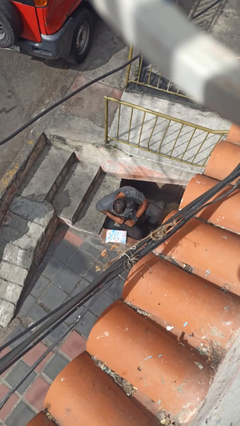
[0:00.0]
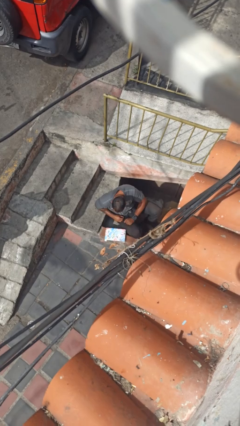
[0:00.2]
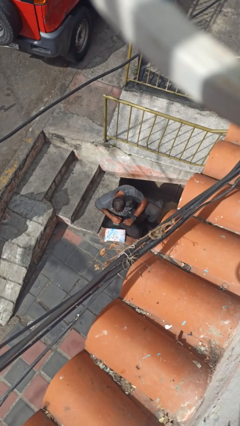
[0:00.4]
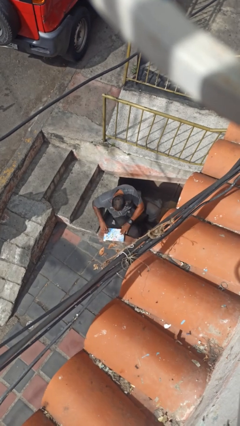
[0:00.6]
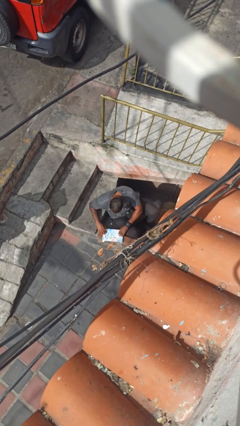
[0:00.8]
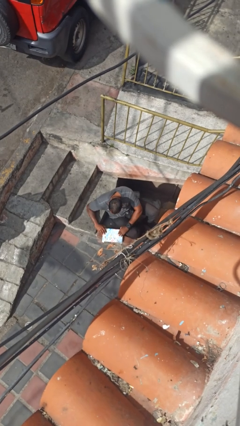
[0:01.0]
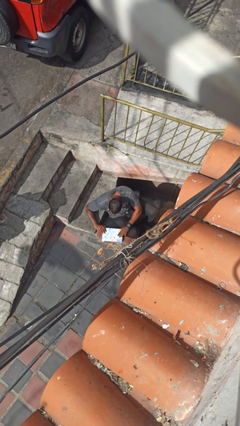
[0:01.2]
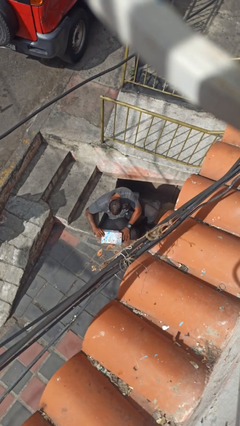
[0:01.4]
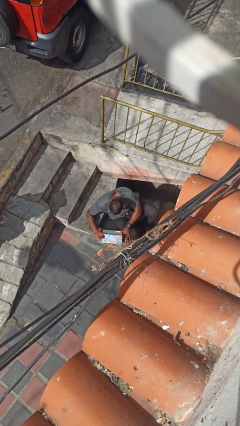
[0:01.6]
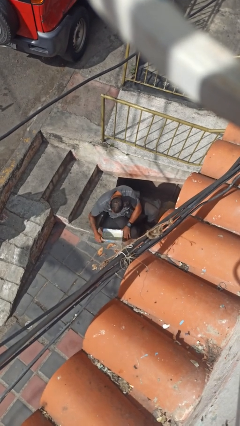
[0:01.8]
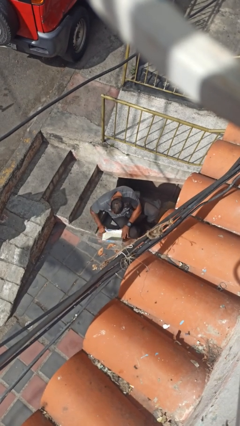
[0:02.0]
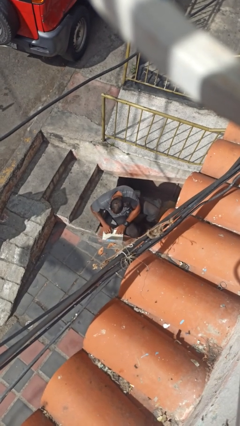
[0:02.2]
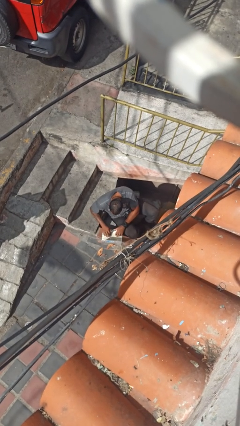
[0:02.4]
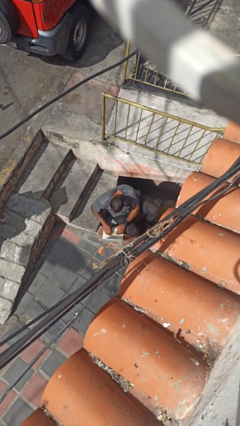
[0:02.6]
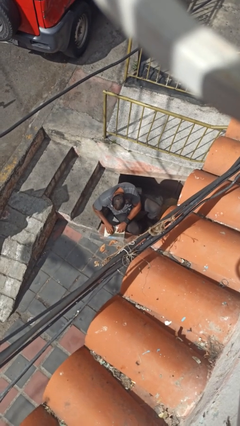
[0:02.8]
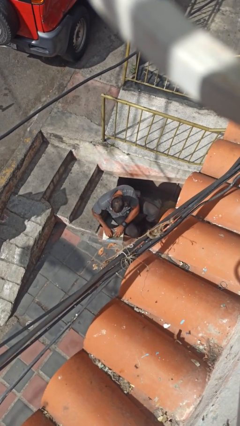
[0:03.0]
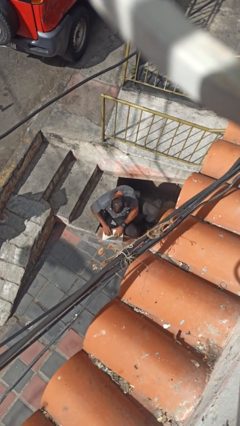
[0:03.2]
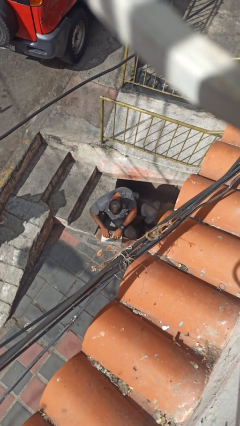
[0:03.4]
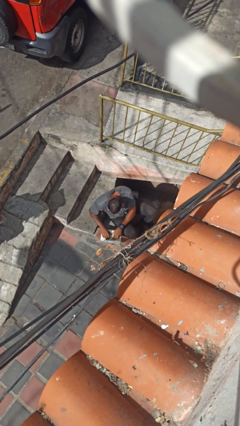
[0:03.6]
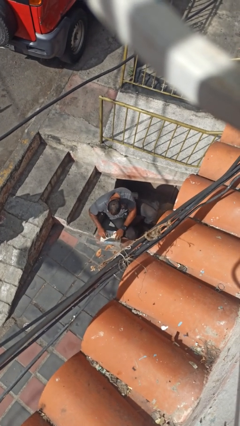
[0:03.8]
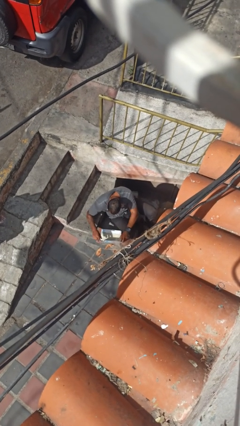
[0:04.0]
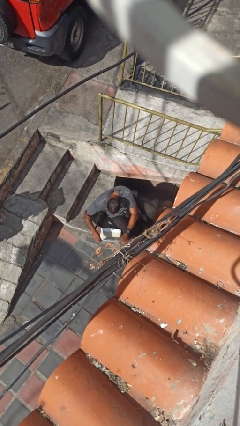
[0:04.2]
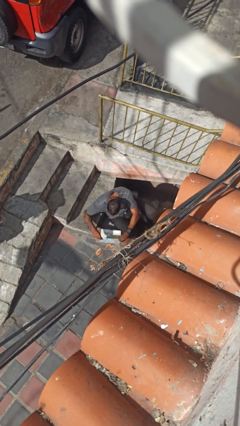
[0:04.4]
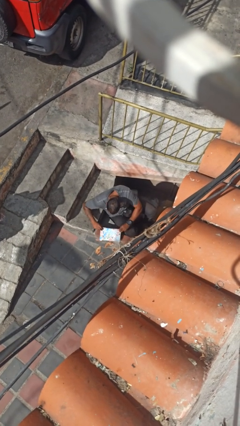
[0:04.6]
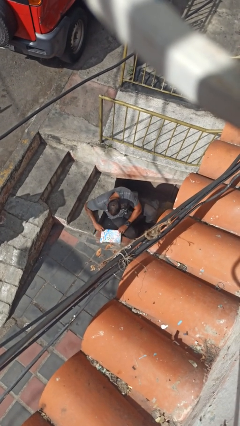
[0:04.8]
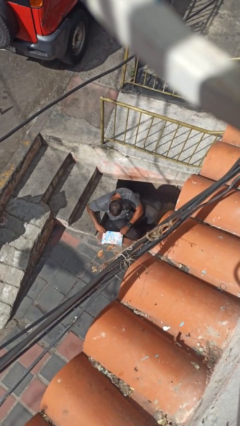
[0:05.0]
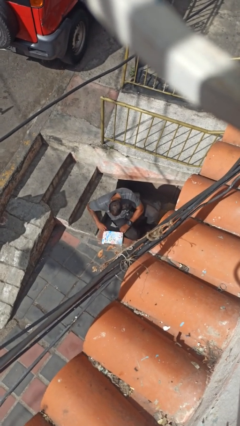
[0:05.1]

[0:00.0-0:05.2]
person interacts with laptop

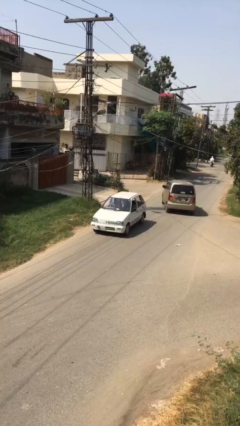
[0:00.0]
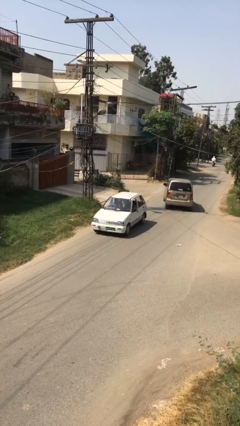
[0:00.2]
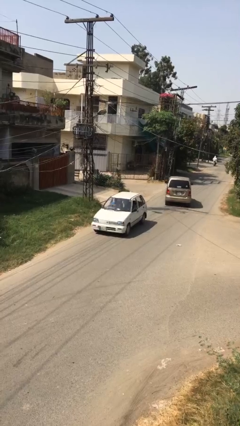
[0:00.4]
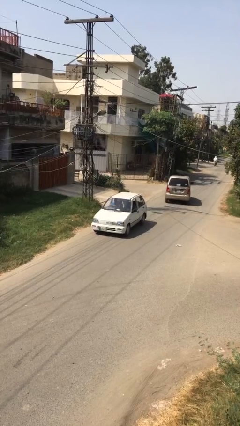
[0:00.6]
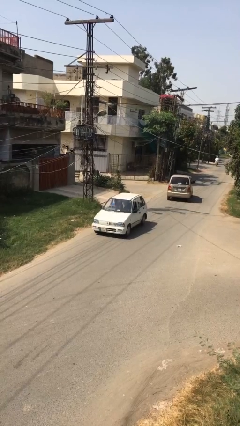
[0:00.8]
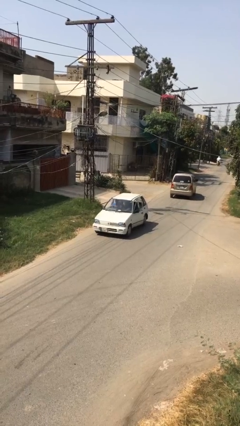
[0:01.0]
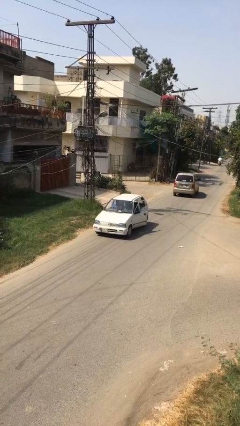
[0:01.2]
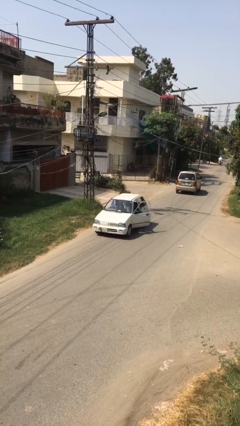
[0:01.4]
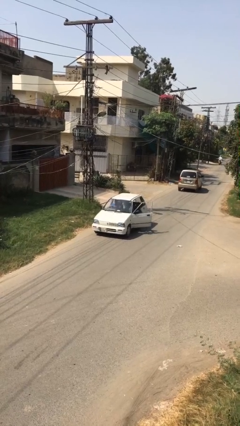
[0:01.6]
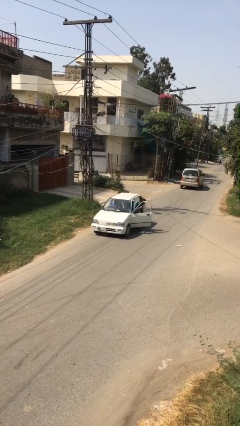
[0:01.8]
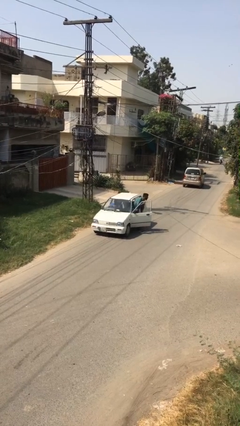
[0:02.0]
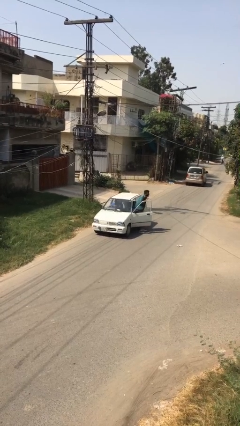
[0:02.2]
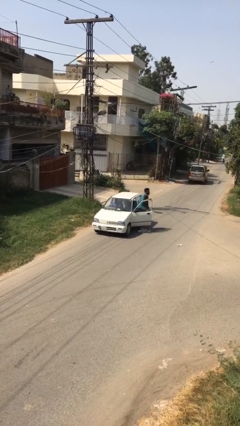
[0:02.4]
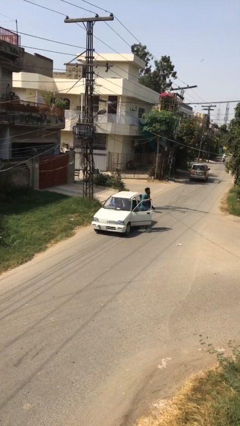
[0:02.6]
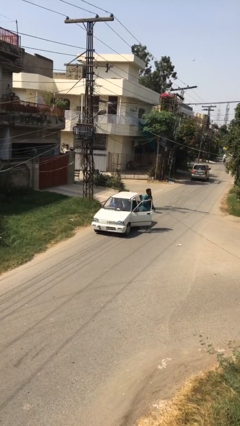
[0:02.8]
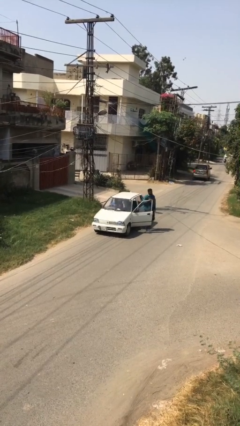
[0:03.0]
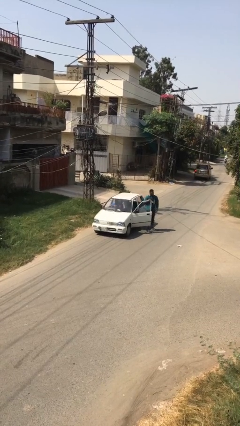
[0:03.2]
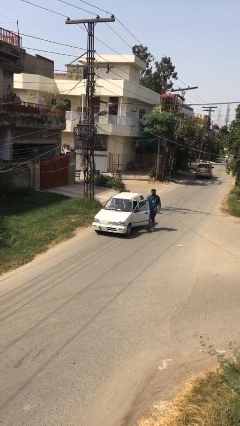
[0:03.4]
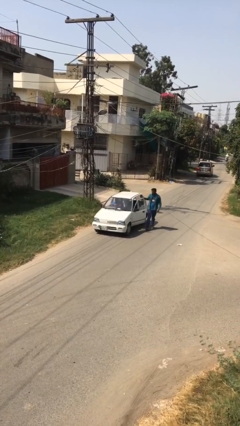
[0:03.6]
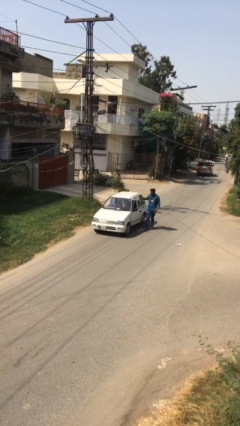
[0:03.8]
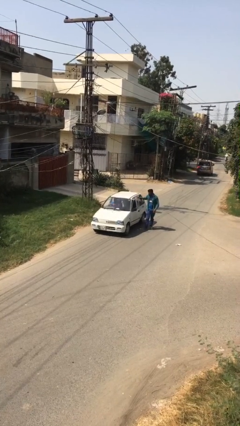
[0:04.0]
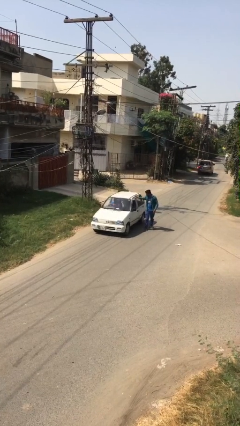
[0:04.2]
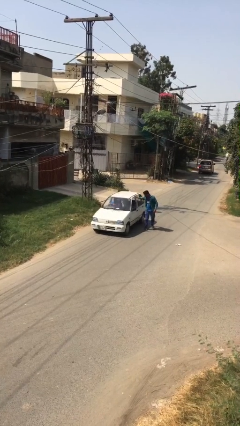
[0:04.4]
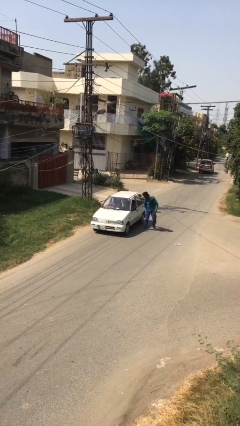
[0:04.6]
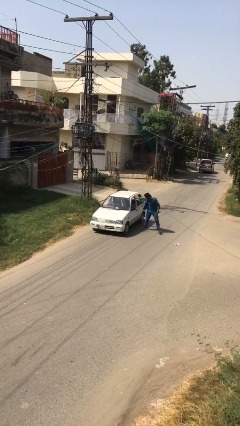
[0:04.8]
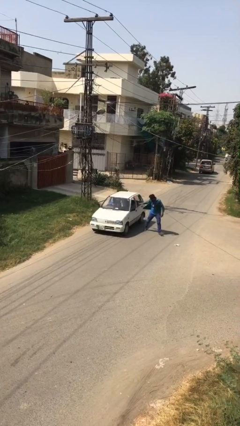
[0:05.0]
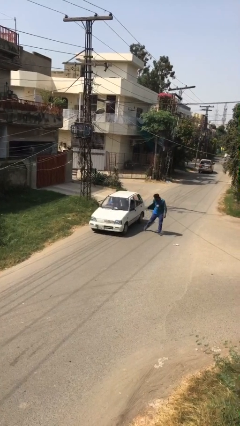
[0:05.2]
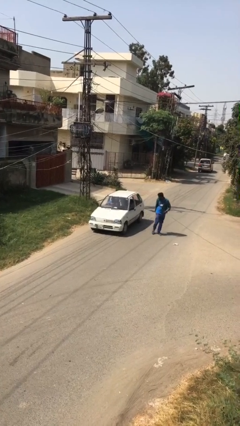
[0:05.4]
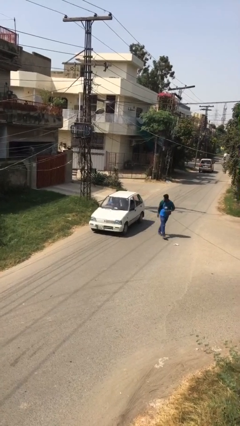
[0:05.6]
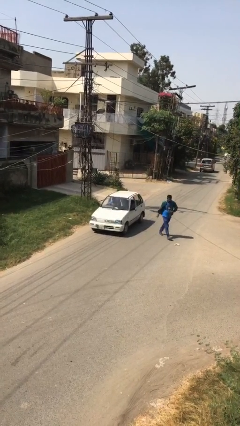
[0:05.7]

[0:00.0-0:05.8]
car drops off person

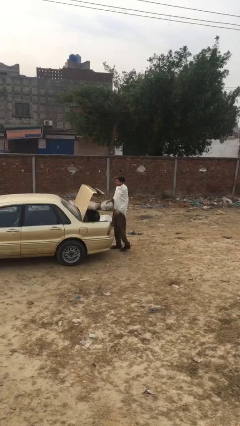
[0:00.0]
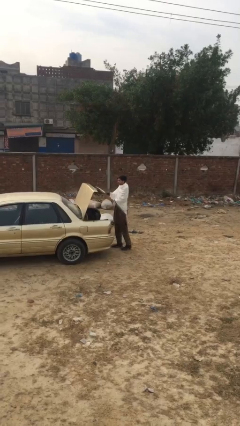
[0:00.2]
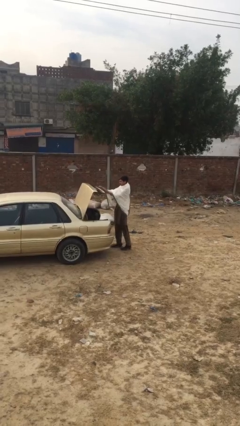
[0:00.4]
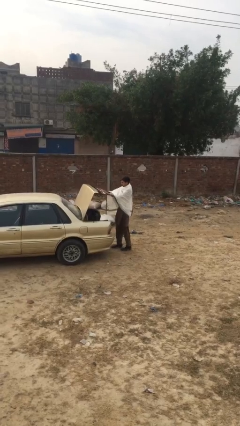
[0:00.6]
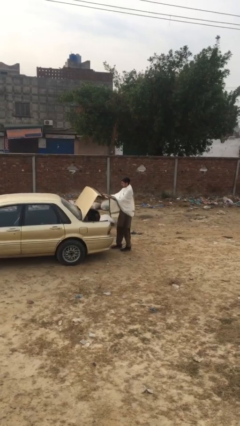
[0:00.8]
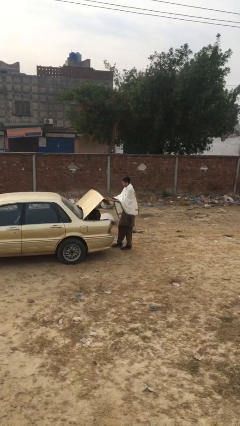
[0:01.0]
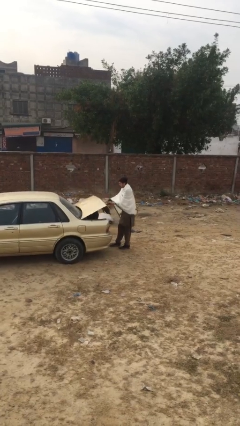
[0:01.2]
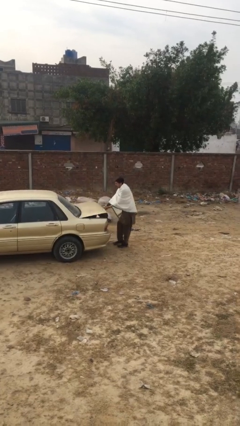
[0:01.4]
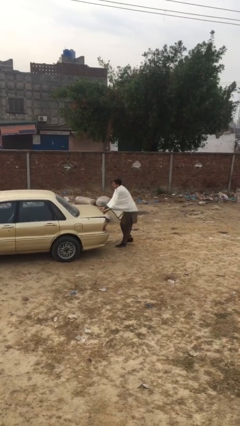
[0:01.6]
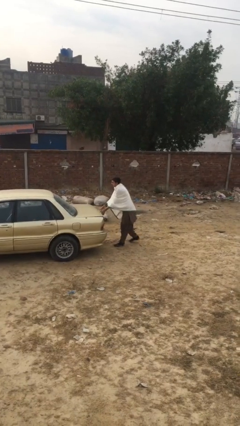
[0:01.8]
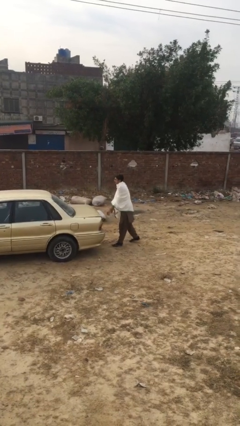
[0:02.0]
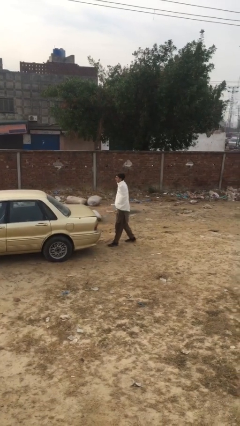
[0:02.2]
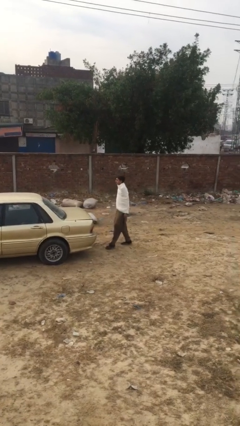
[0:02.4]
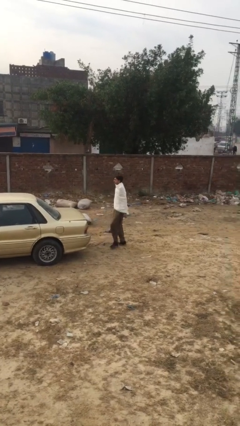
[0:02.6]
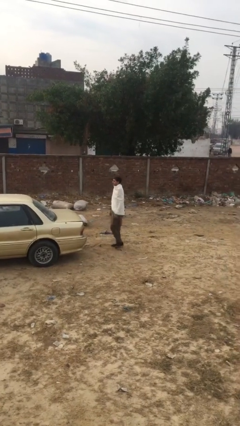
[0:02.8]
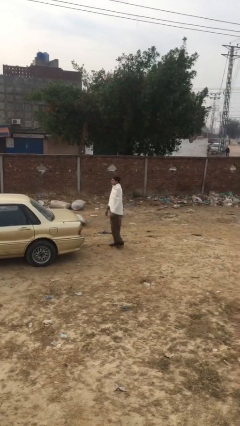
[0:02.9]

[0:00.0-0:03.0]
person closes car trunk

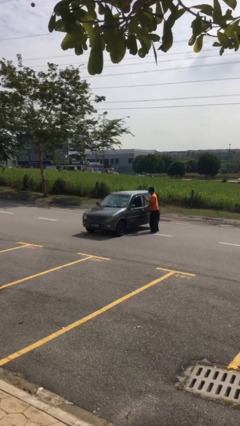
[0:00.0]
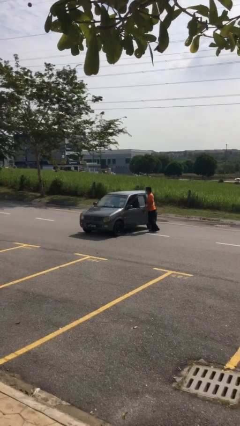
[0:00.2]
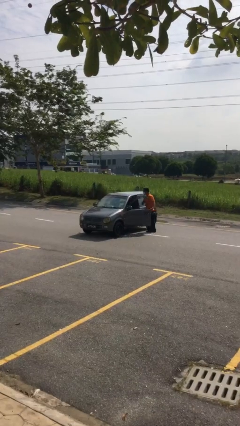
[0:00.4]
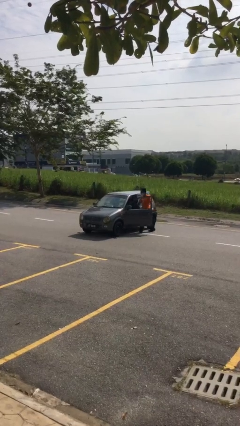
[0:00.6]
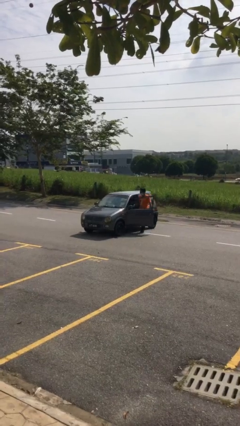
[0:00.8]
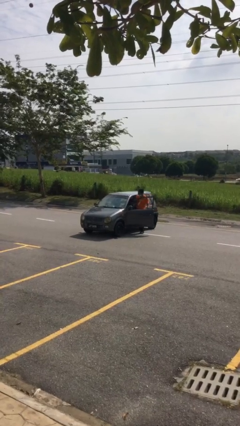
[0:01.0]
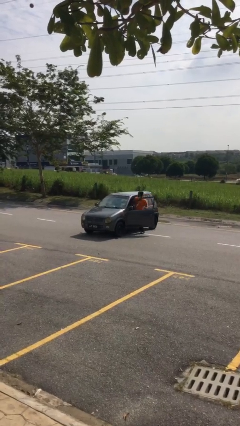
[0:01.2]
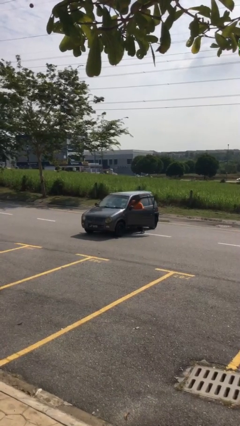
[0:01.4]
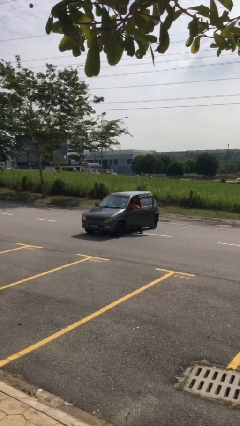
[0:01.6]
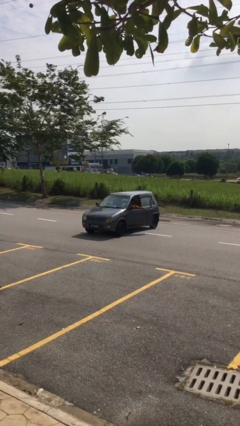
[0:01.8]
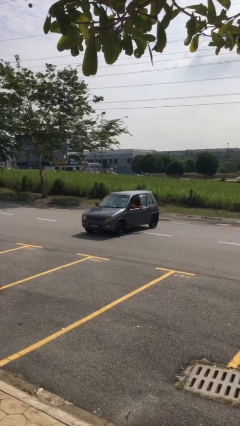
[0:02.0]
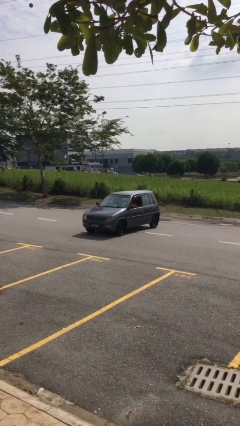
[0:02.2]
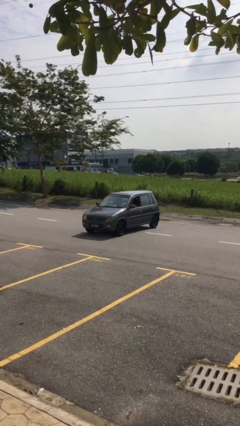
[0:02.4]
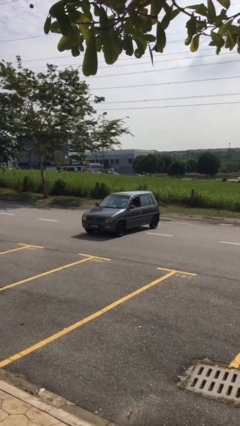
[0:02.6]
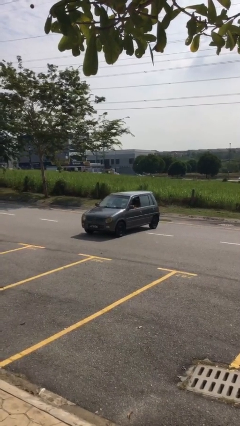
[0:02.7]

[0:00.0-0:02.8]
car picks up person

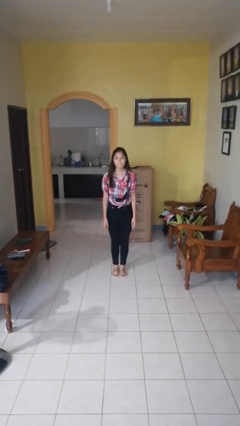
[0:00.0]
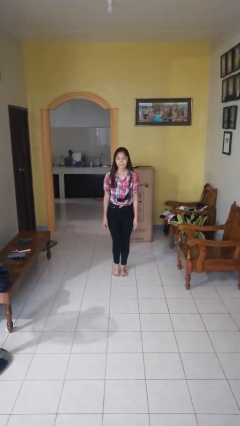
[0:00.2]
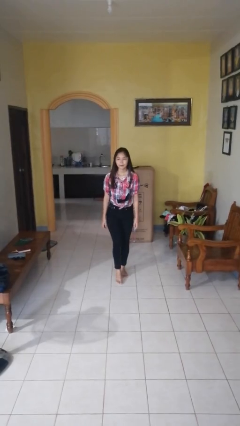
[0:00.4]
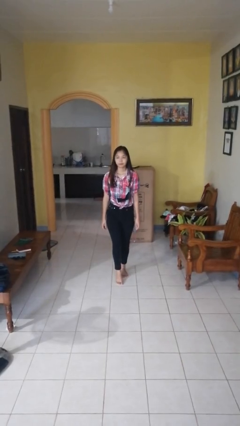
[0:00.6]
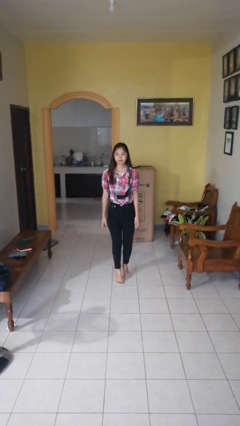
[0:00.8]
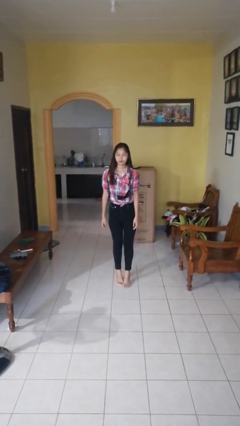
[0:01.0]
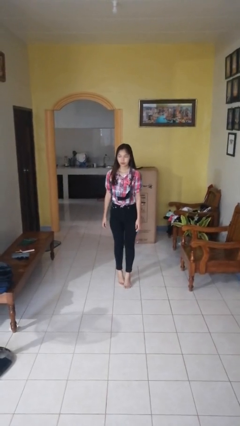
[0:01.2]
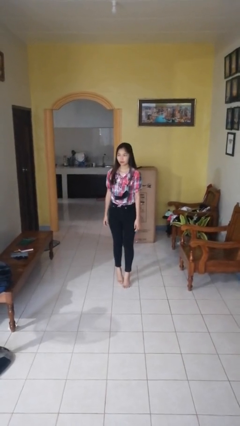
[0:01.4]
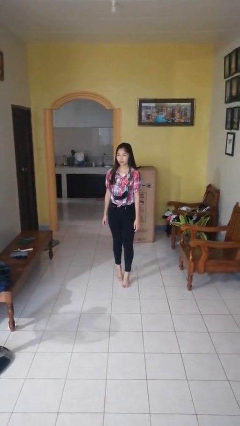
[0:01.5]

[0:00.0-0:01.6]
person walks tiptoe
